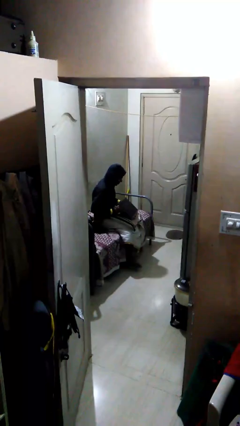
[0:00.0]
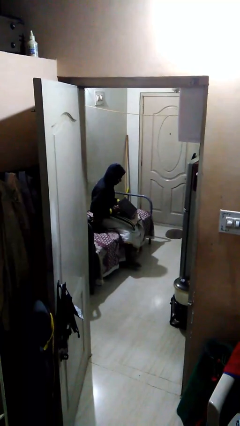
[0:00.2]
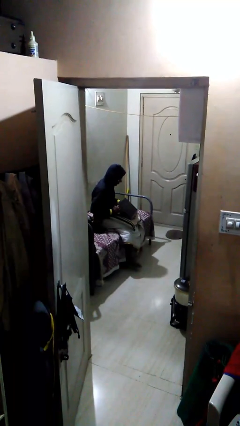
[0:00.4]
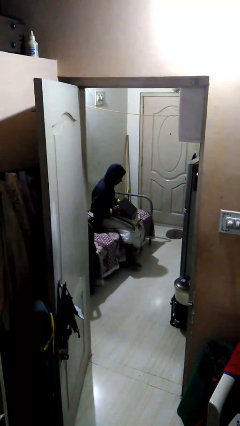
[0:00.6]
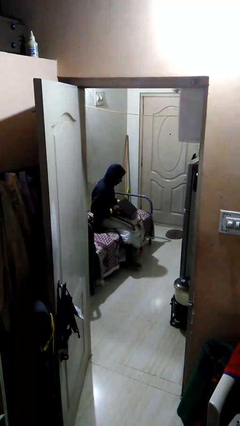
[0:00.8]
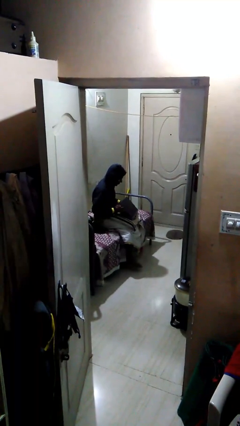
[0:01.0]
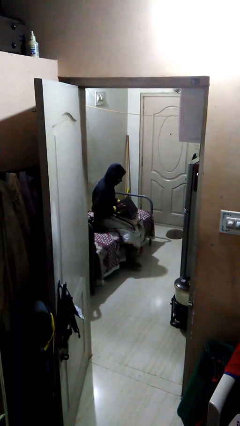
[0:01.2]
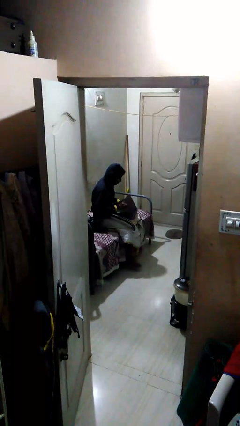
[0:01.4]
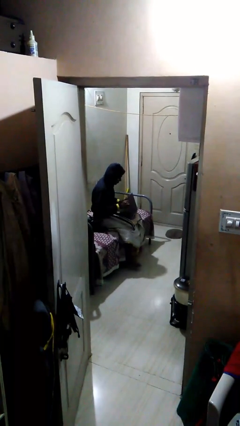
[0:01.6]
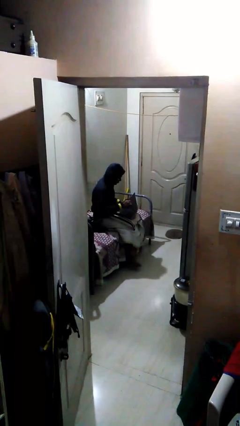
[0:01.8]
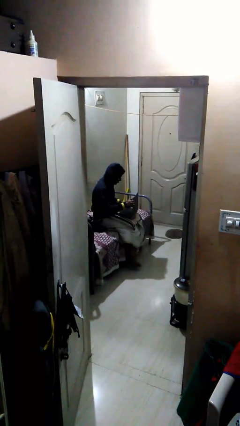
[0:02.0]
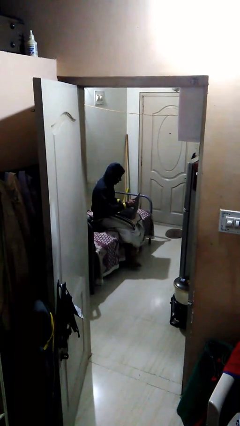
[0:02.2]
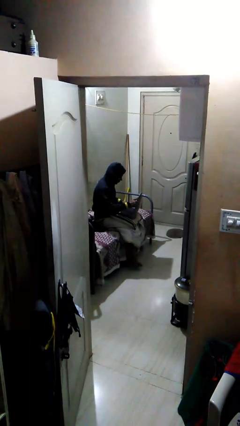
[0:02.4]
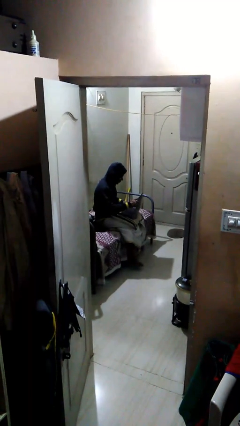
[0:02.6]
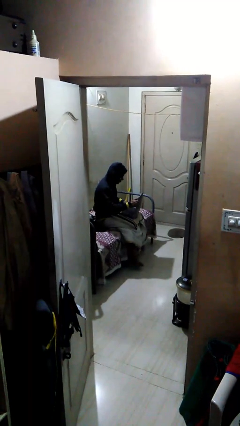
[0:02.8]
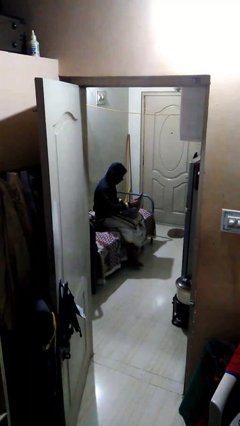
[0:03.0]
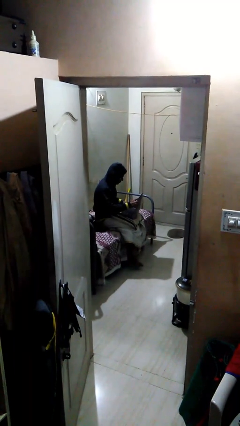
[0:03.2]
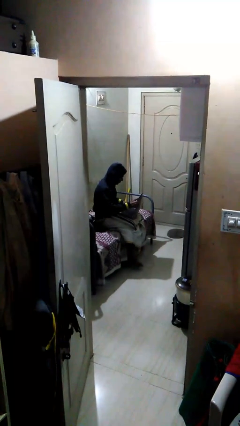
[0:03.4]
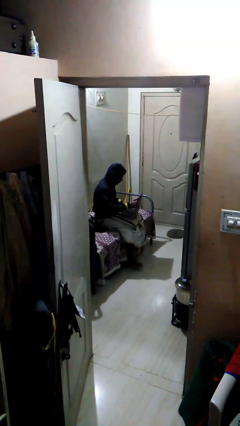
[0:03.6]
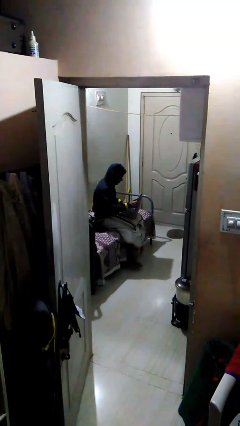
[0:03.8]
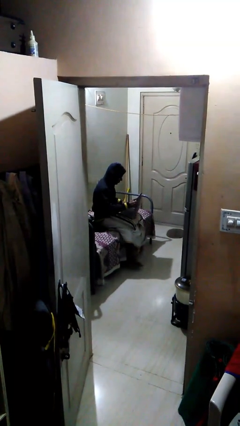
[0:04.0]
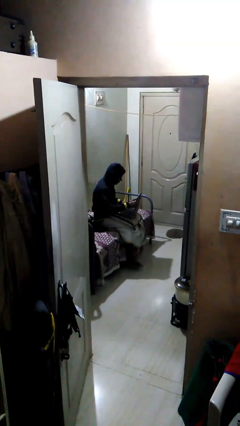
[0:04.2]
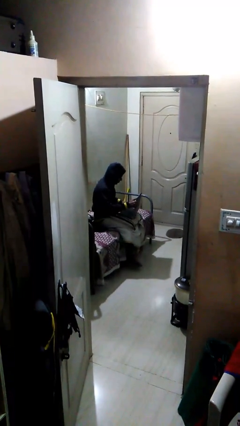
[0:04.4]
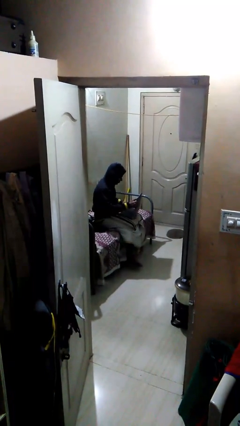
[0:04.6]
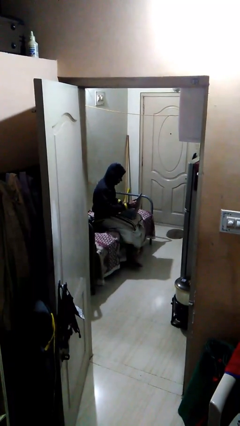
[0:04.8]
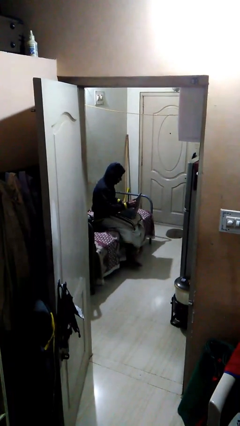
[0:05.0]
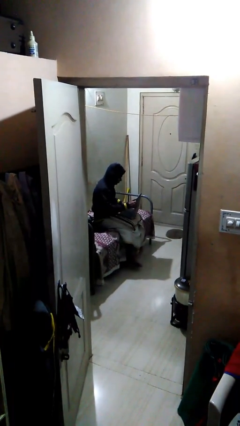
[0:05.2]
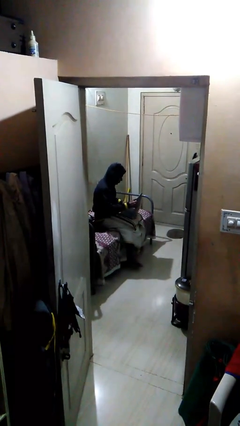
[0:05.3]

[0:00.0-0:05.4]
person interacts with laptop

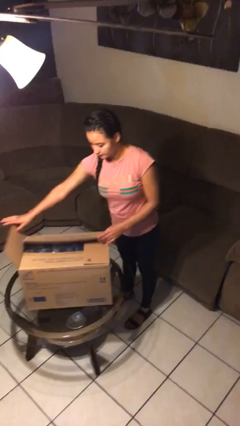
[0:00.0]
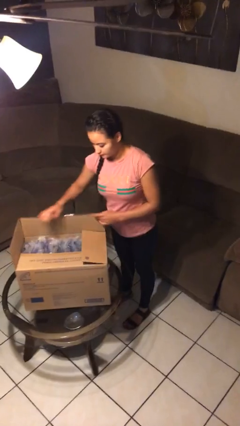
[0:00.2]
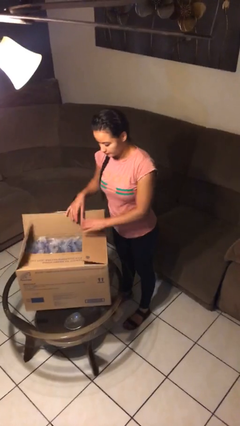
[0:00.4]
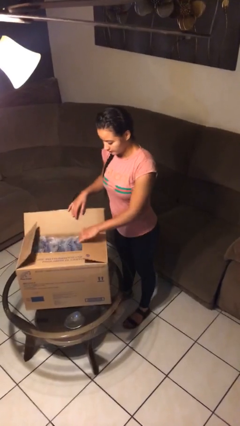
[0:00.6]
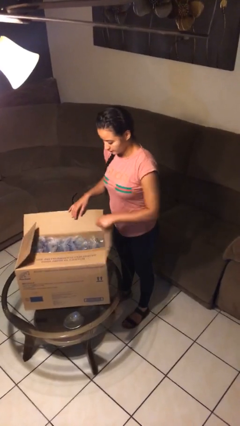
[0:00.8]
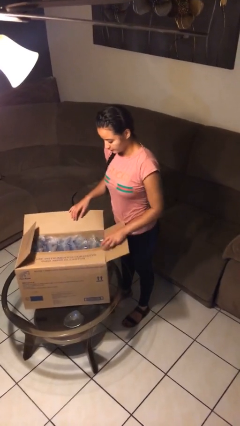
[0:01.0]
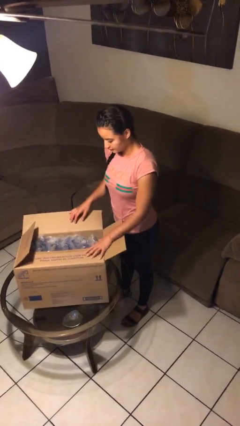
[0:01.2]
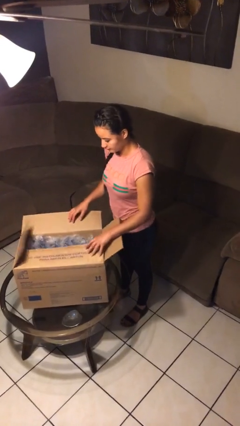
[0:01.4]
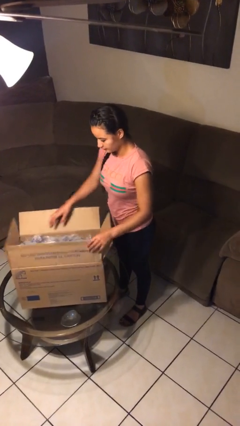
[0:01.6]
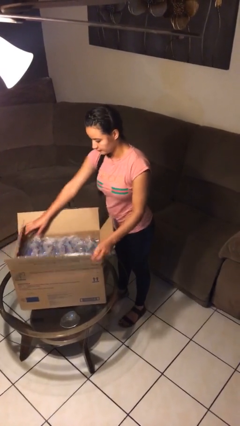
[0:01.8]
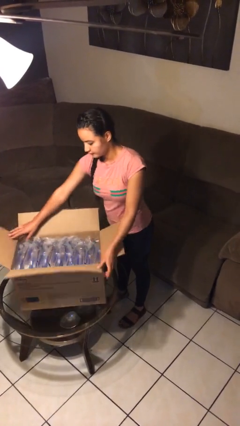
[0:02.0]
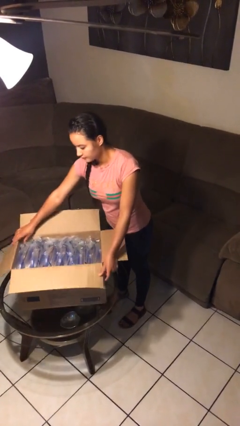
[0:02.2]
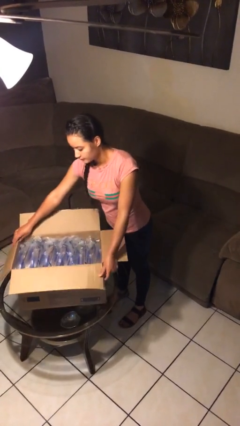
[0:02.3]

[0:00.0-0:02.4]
person opens box

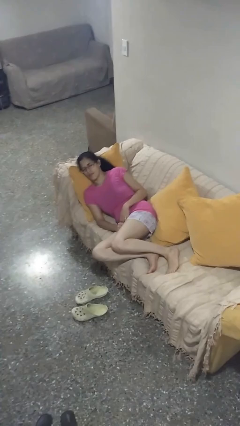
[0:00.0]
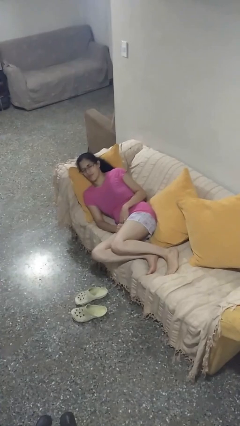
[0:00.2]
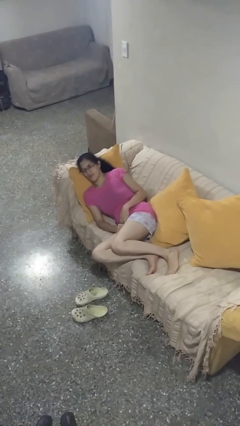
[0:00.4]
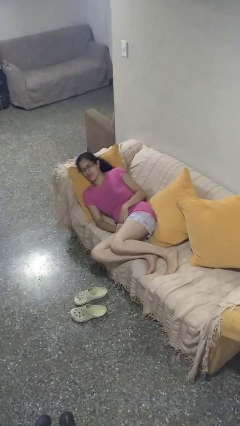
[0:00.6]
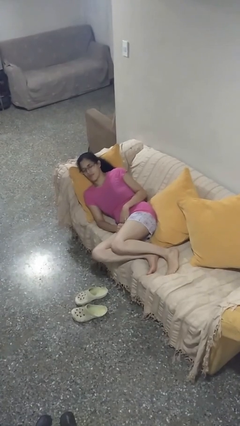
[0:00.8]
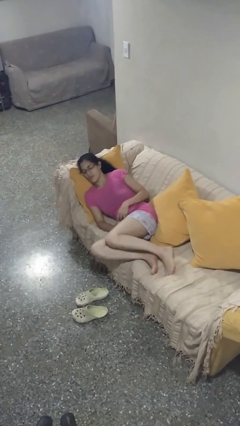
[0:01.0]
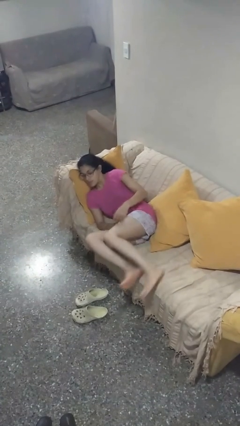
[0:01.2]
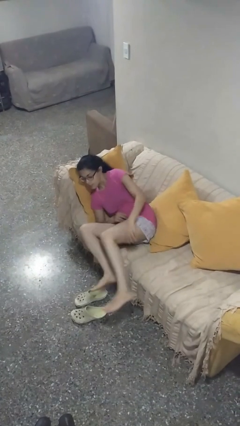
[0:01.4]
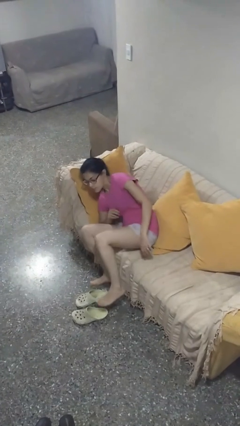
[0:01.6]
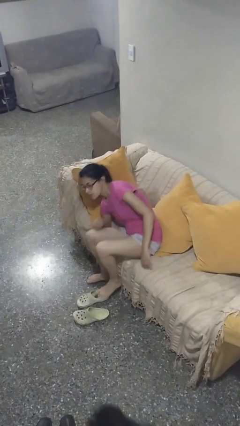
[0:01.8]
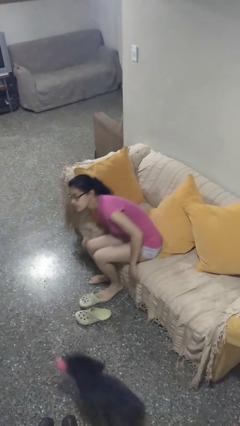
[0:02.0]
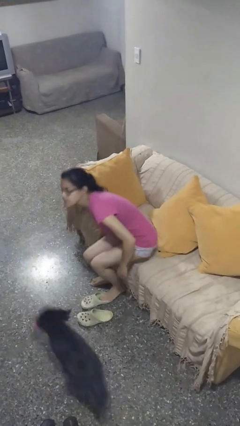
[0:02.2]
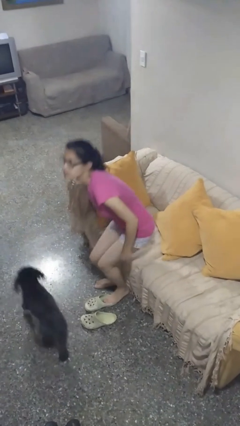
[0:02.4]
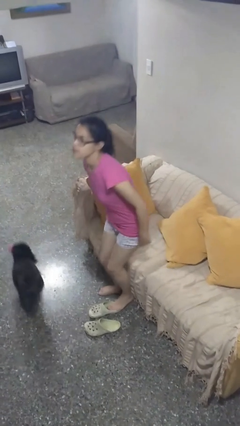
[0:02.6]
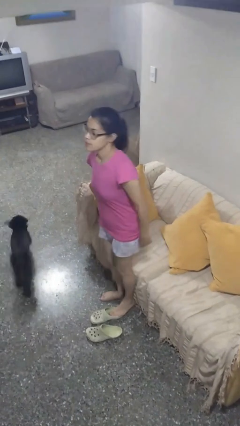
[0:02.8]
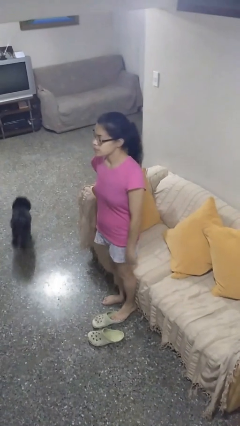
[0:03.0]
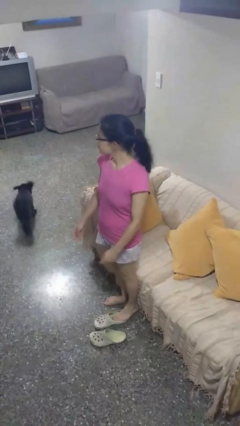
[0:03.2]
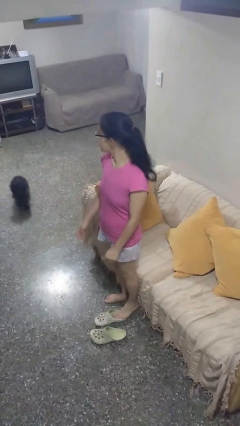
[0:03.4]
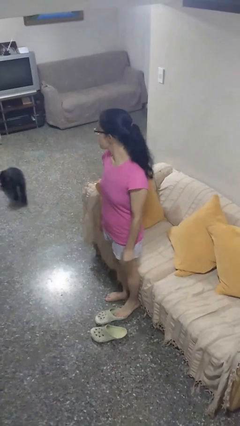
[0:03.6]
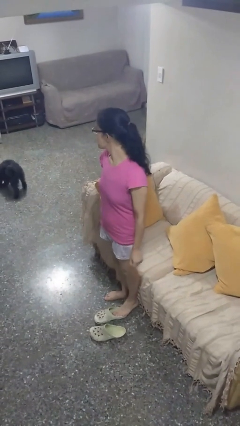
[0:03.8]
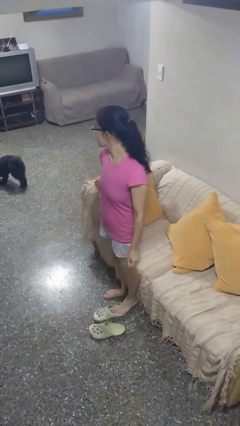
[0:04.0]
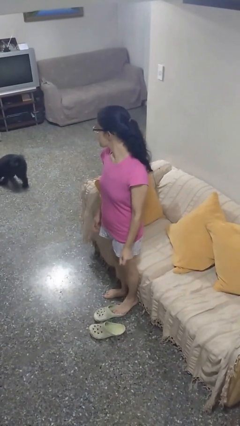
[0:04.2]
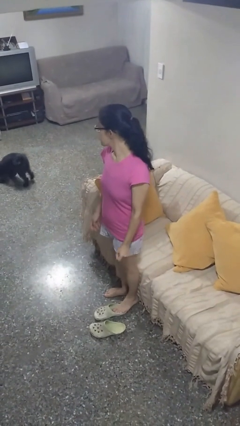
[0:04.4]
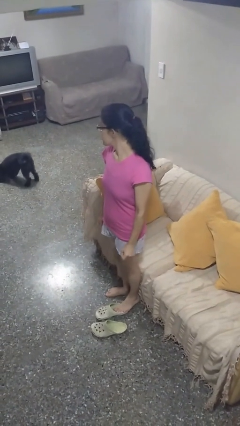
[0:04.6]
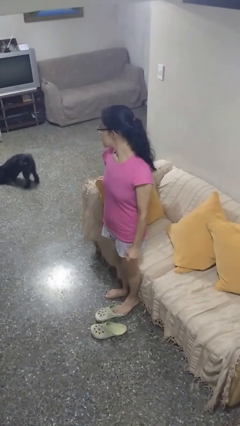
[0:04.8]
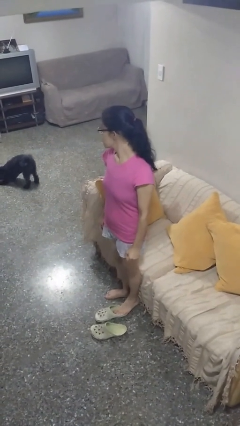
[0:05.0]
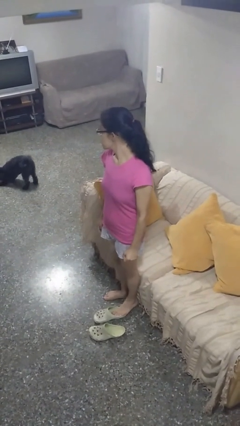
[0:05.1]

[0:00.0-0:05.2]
person stands up

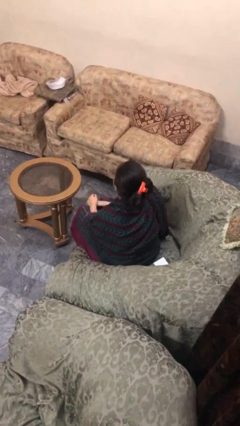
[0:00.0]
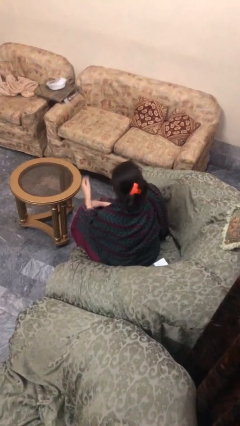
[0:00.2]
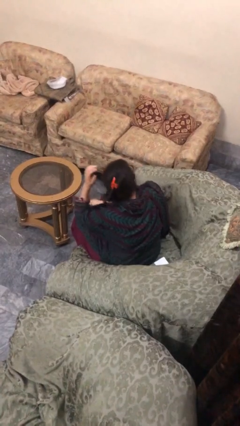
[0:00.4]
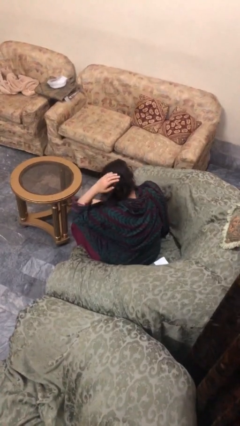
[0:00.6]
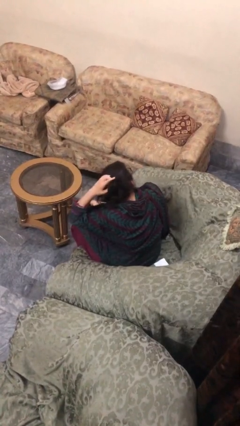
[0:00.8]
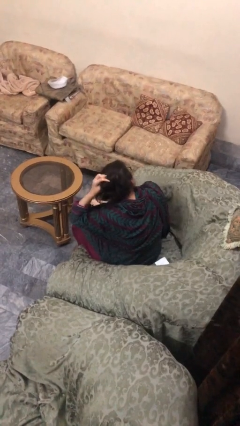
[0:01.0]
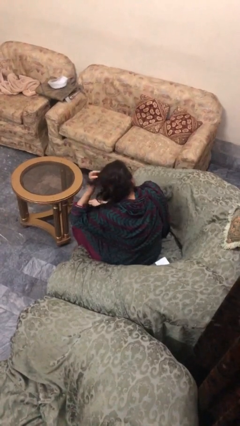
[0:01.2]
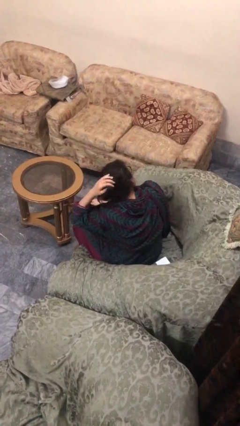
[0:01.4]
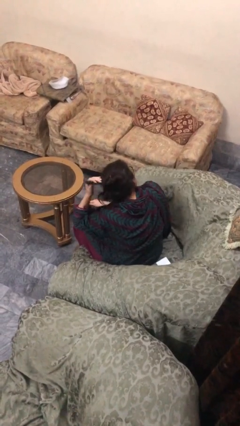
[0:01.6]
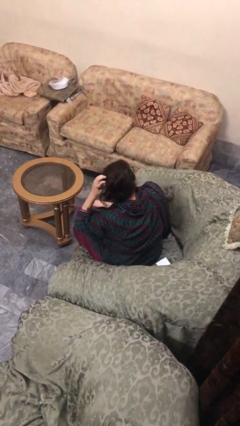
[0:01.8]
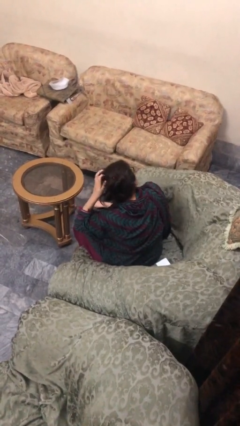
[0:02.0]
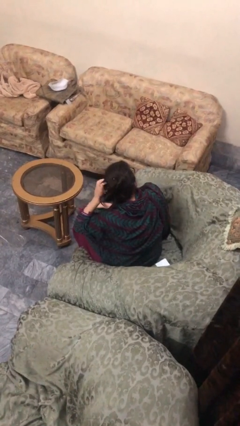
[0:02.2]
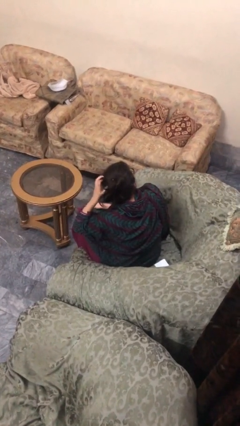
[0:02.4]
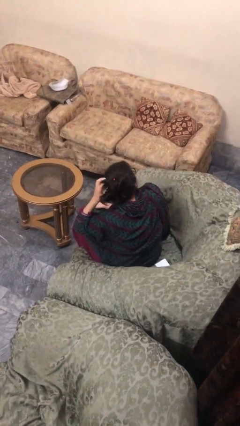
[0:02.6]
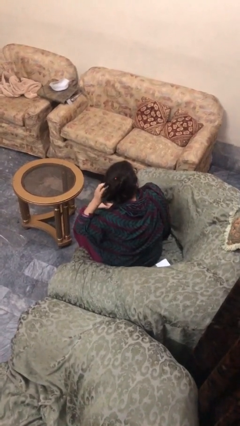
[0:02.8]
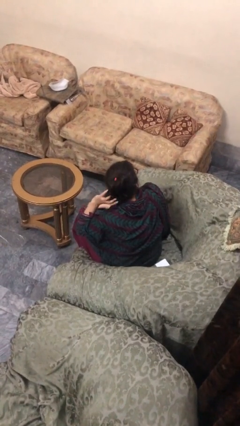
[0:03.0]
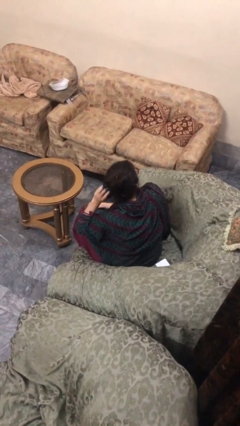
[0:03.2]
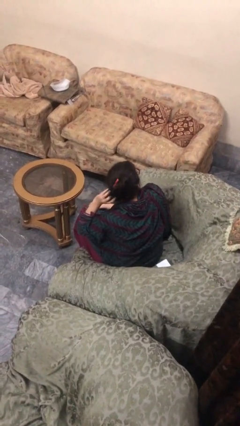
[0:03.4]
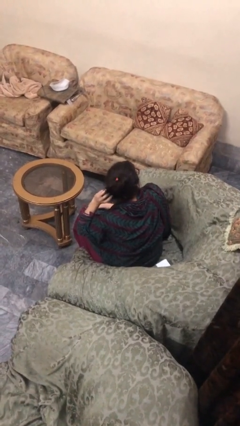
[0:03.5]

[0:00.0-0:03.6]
person strokes hair

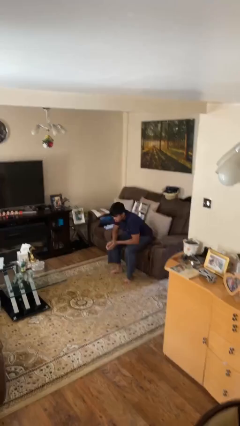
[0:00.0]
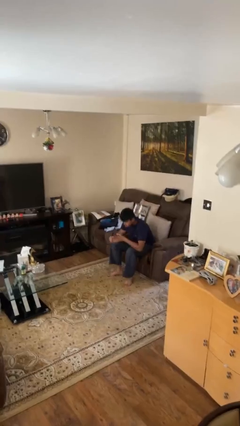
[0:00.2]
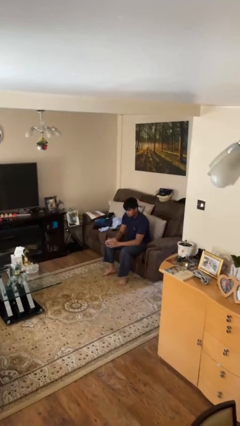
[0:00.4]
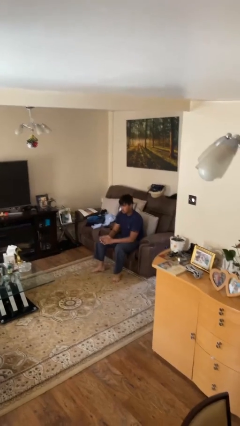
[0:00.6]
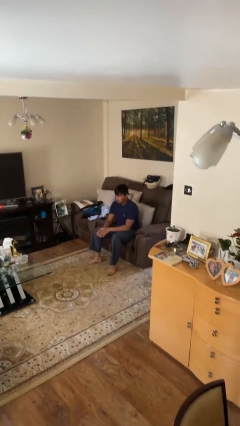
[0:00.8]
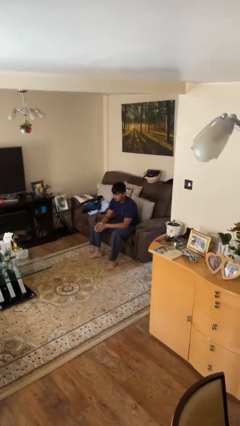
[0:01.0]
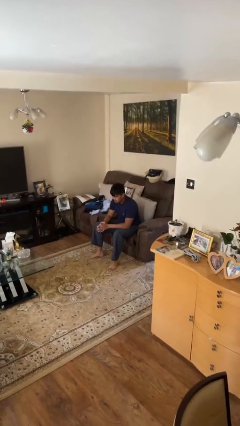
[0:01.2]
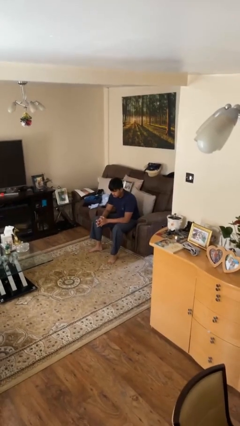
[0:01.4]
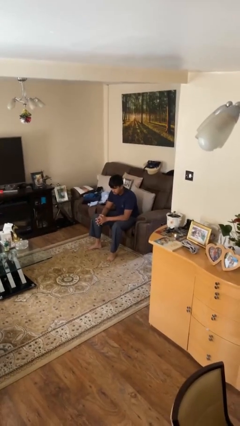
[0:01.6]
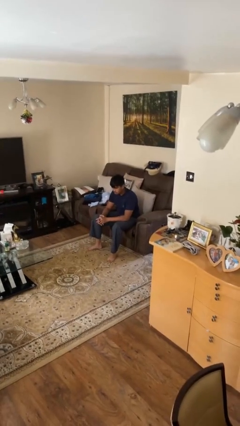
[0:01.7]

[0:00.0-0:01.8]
person sits down
